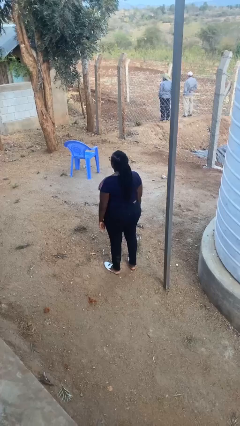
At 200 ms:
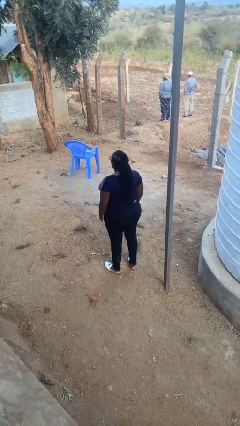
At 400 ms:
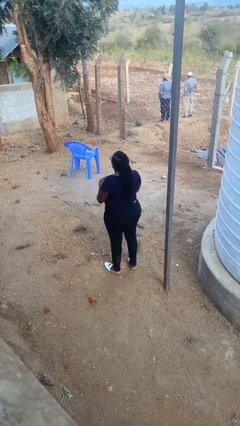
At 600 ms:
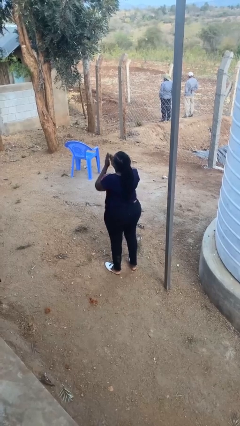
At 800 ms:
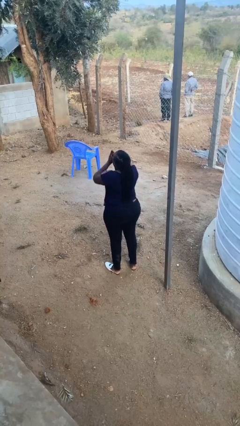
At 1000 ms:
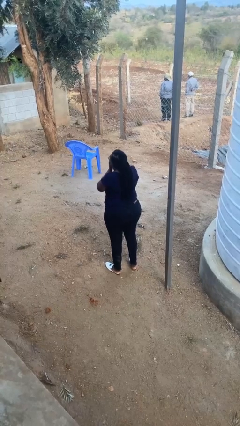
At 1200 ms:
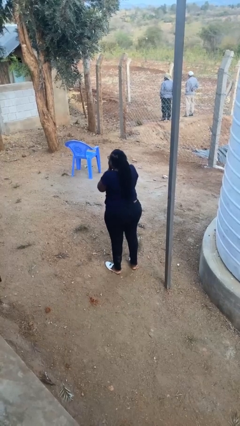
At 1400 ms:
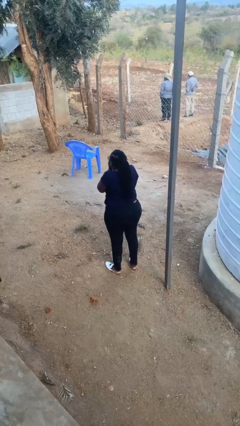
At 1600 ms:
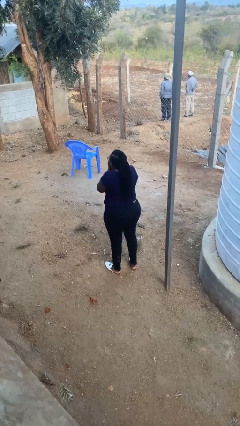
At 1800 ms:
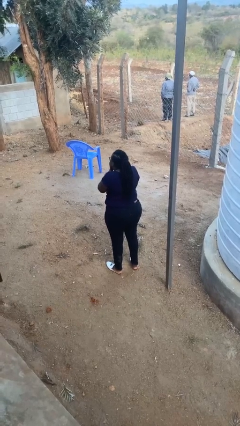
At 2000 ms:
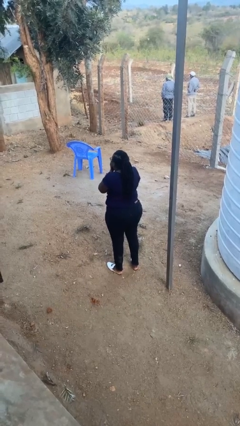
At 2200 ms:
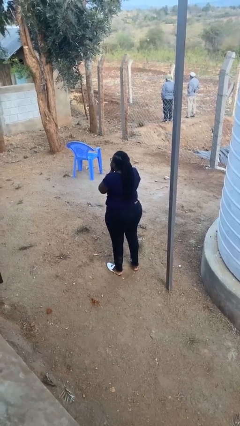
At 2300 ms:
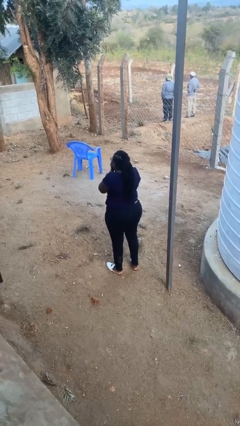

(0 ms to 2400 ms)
person sneezes into hand

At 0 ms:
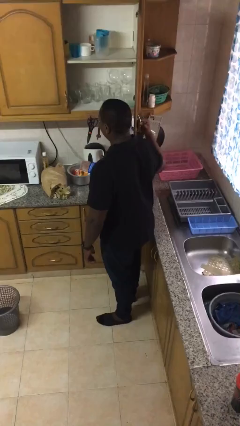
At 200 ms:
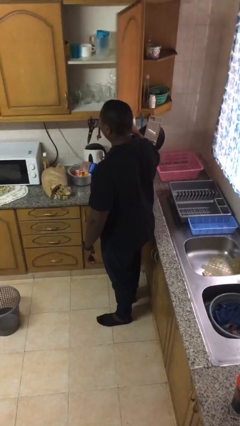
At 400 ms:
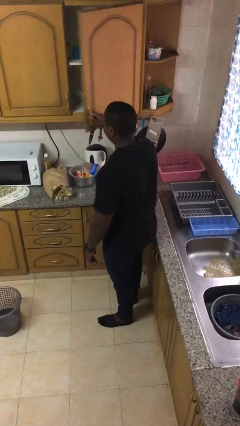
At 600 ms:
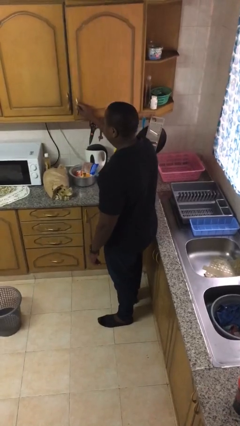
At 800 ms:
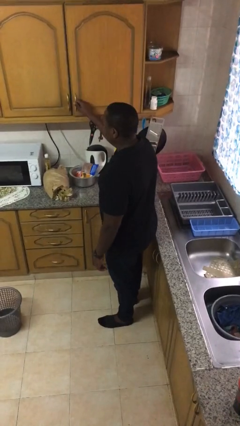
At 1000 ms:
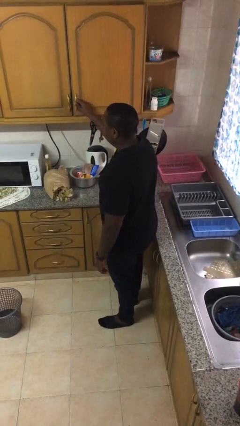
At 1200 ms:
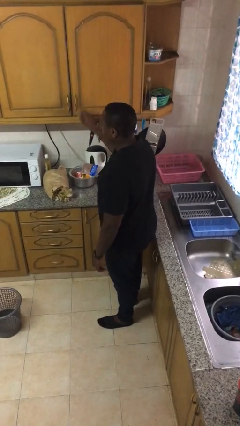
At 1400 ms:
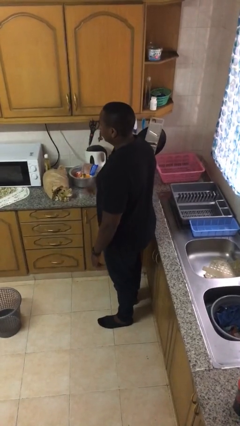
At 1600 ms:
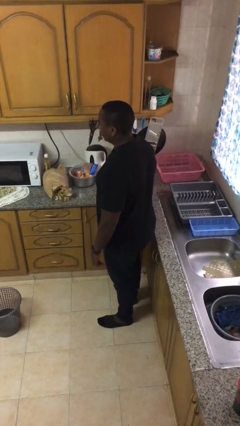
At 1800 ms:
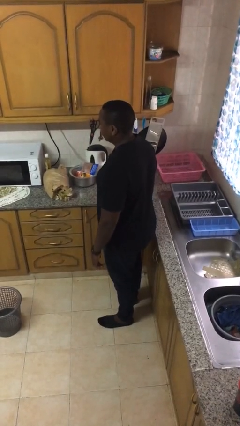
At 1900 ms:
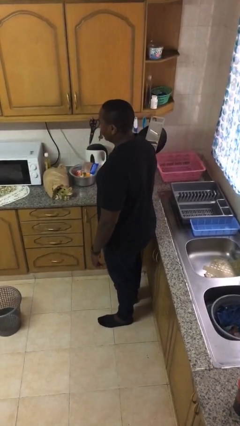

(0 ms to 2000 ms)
person closes cabinet

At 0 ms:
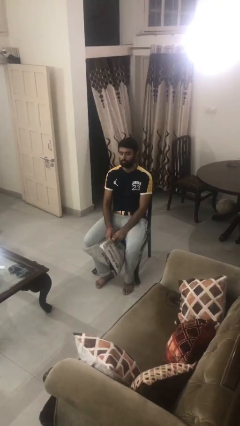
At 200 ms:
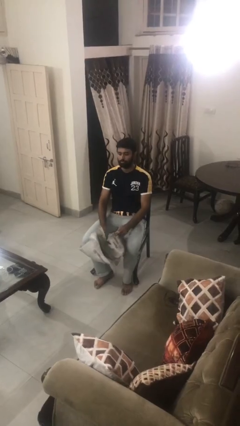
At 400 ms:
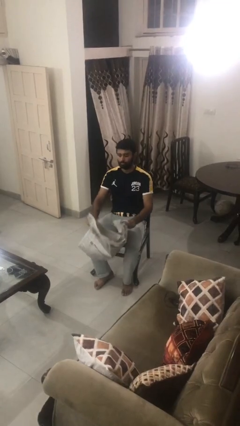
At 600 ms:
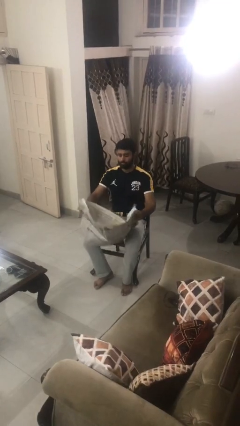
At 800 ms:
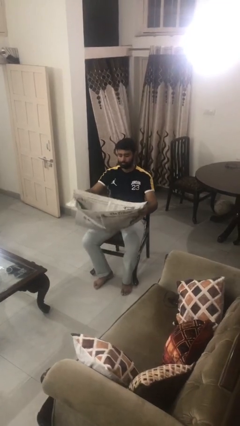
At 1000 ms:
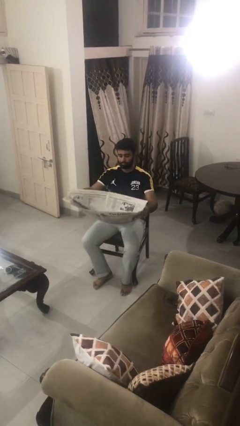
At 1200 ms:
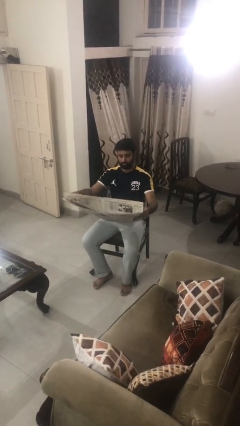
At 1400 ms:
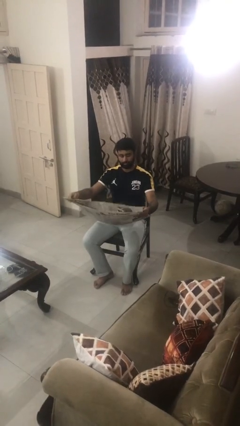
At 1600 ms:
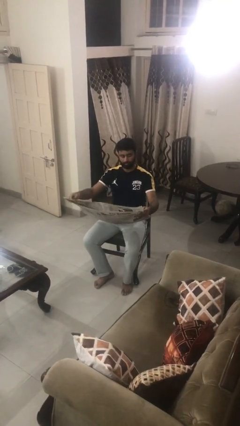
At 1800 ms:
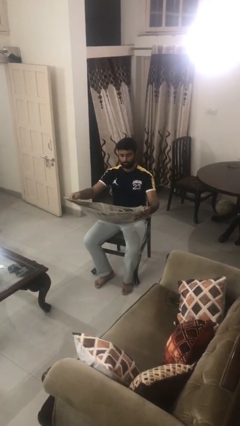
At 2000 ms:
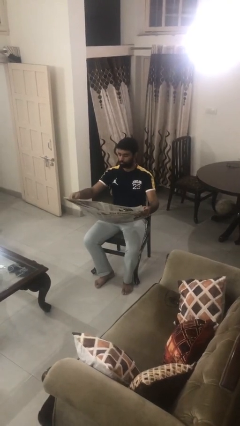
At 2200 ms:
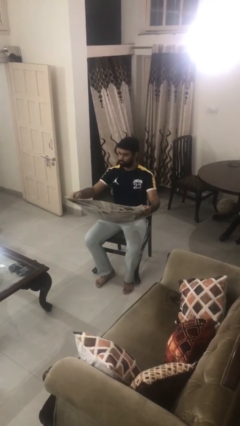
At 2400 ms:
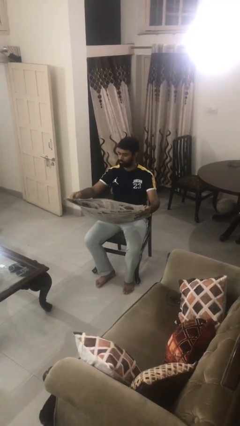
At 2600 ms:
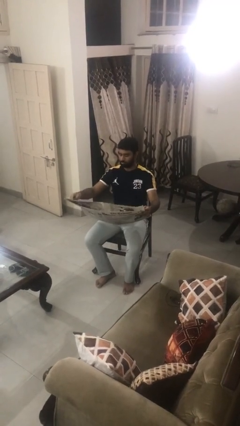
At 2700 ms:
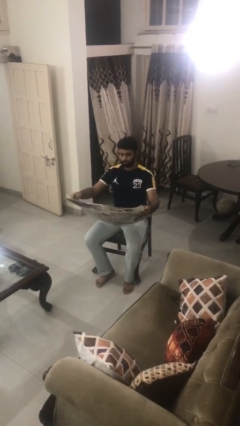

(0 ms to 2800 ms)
person reads newspaper

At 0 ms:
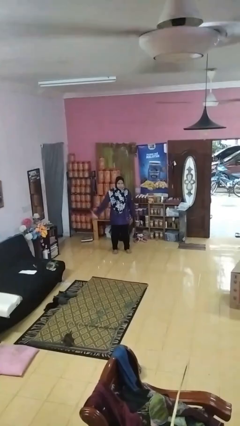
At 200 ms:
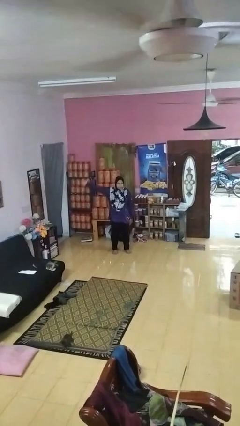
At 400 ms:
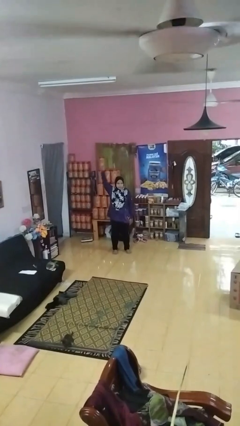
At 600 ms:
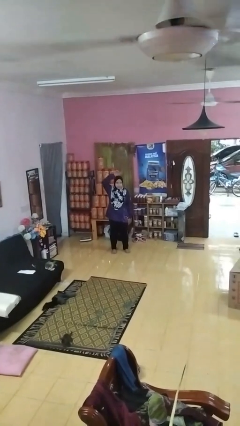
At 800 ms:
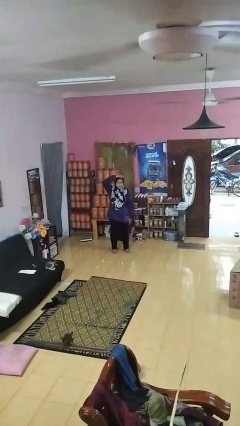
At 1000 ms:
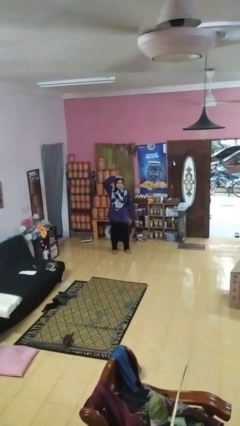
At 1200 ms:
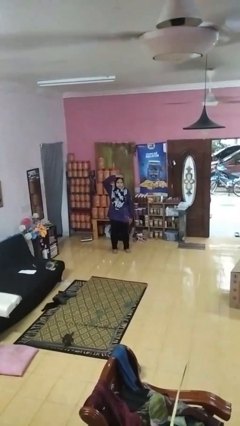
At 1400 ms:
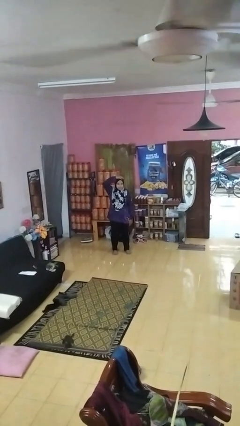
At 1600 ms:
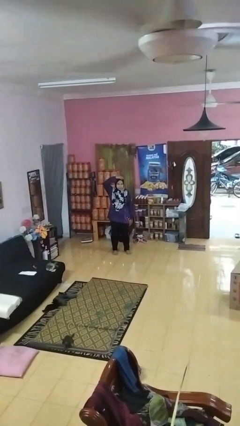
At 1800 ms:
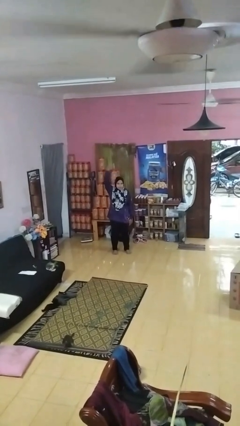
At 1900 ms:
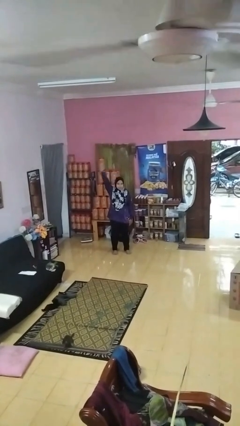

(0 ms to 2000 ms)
person pats head

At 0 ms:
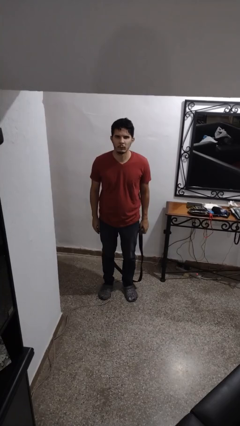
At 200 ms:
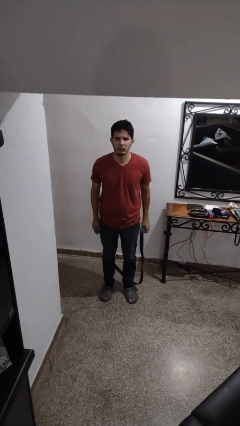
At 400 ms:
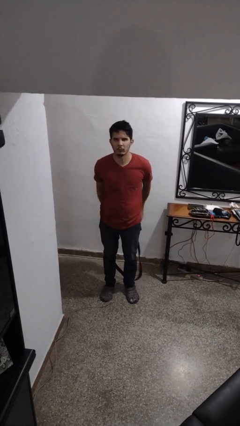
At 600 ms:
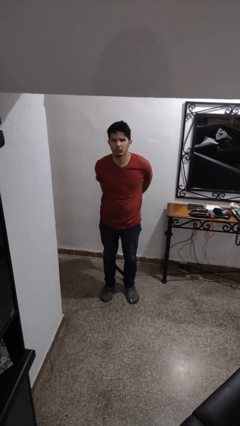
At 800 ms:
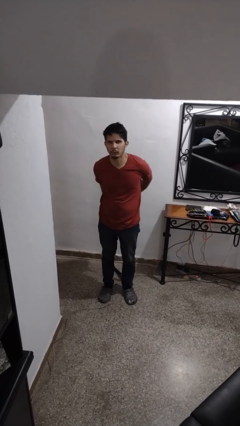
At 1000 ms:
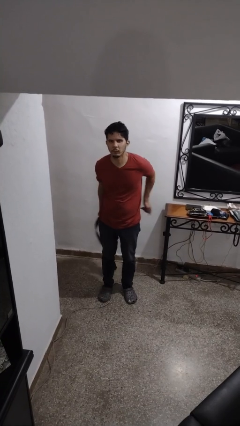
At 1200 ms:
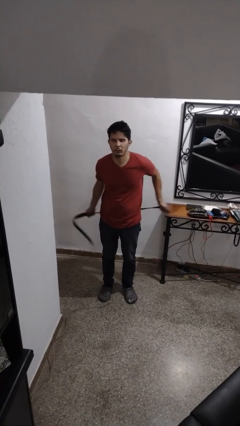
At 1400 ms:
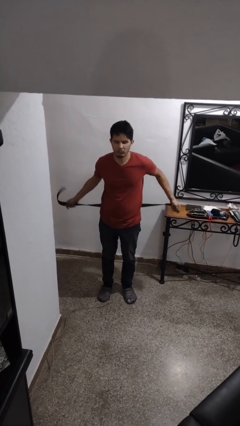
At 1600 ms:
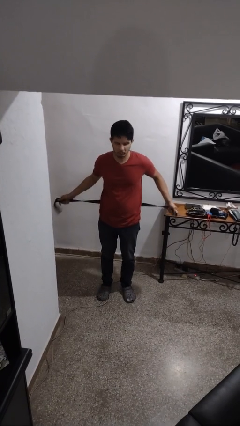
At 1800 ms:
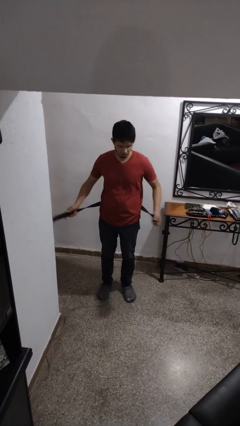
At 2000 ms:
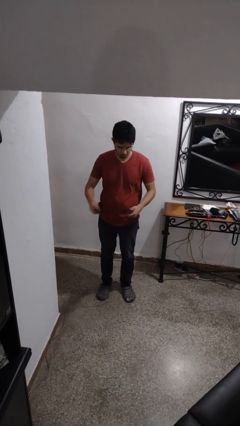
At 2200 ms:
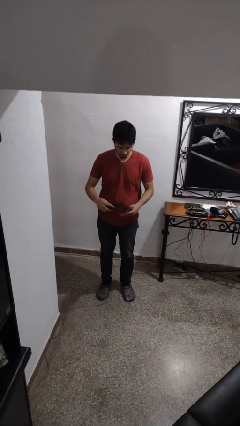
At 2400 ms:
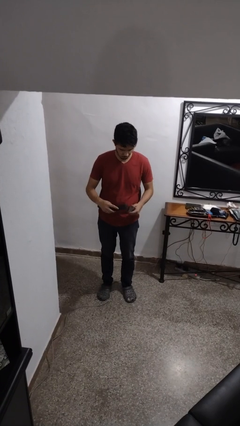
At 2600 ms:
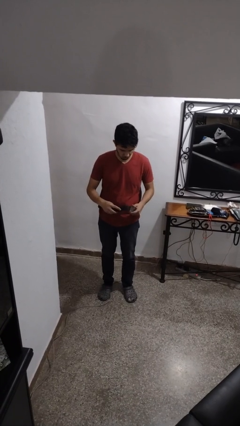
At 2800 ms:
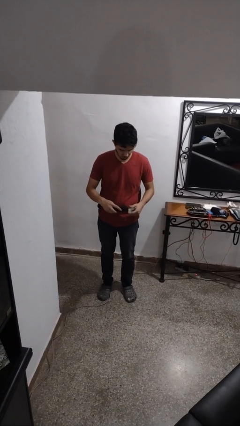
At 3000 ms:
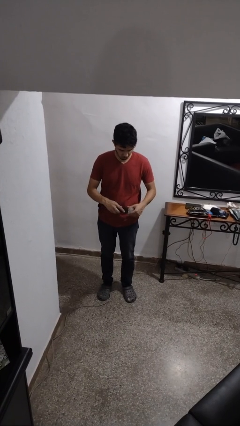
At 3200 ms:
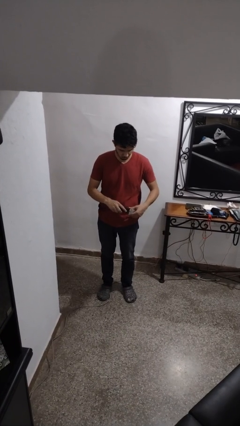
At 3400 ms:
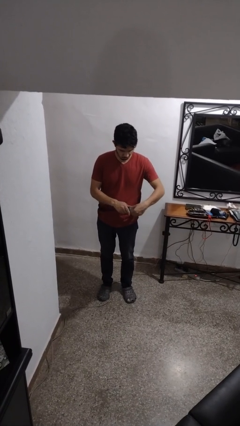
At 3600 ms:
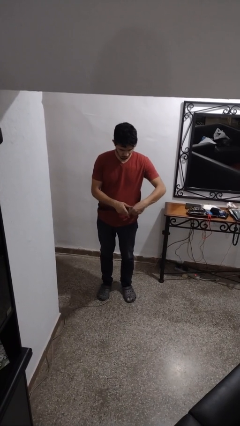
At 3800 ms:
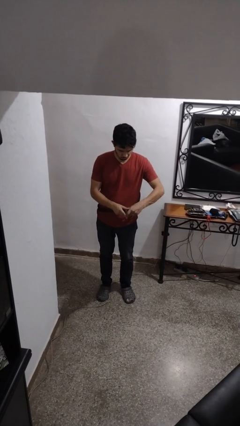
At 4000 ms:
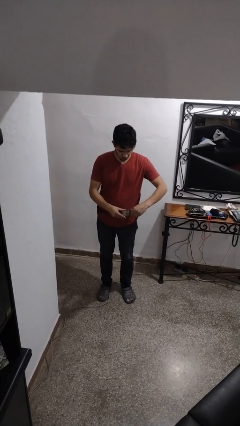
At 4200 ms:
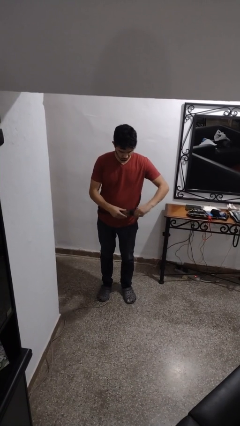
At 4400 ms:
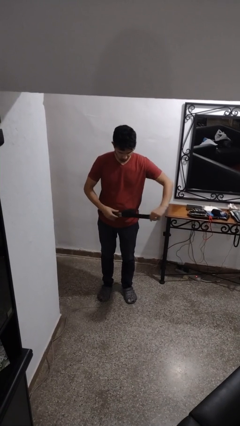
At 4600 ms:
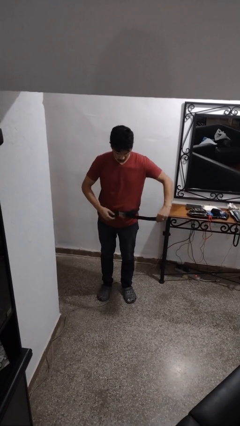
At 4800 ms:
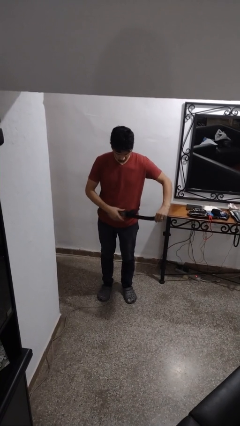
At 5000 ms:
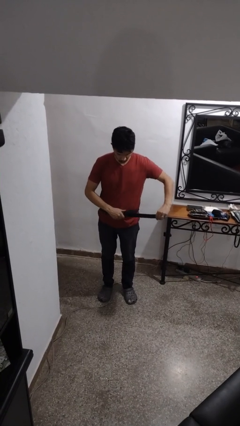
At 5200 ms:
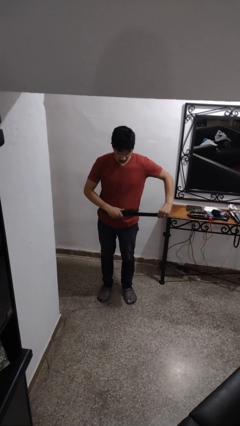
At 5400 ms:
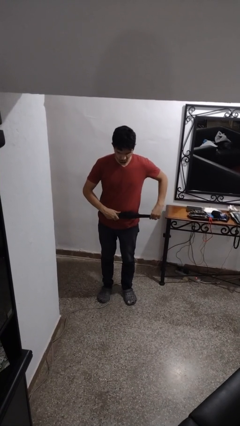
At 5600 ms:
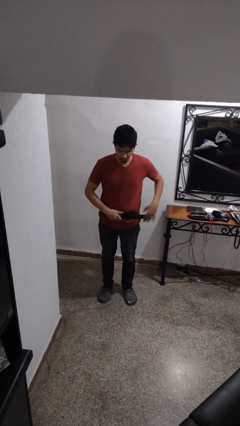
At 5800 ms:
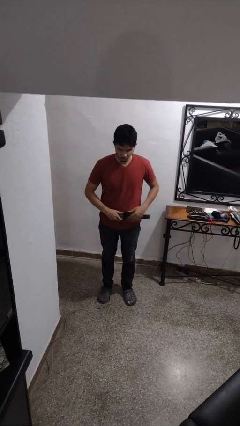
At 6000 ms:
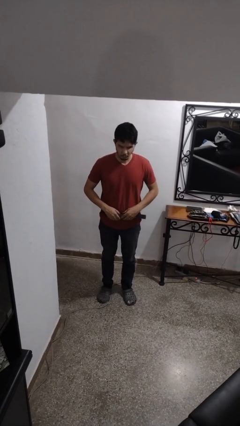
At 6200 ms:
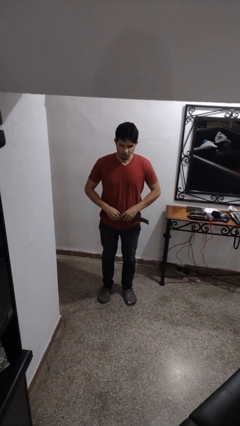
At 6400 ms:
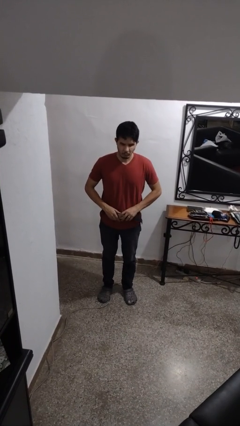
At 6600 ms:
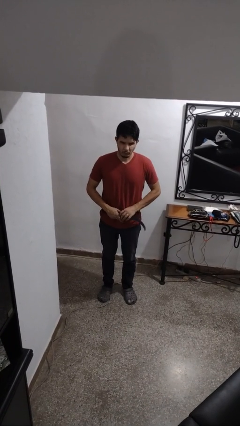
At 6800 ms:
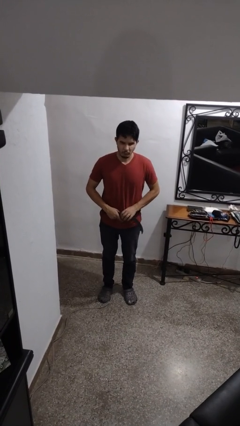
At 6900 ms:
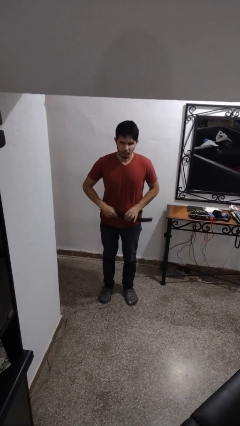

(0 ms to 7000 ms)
person puts on belt

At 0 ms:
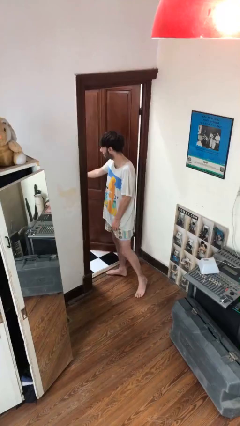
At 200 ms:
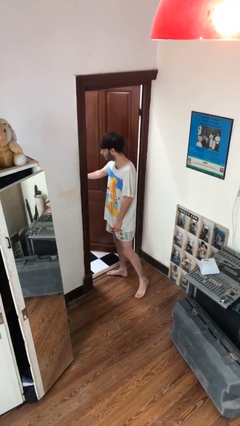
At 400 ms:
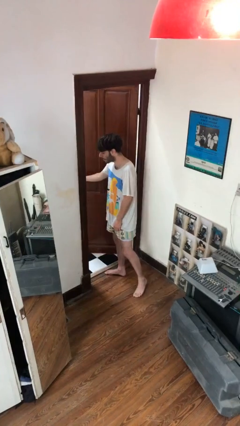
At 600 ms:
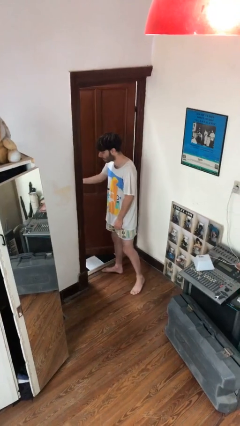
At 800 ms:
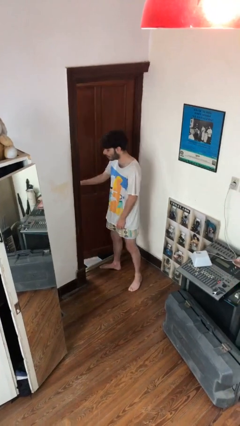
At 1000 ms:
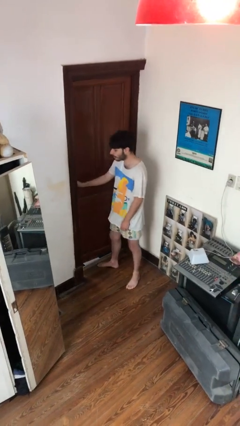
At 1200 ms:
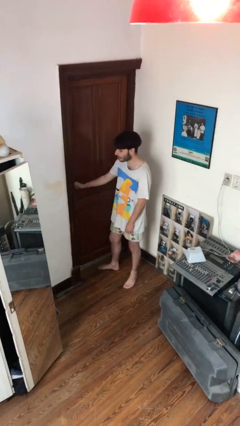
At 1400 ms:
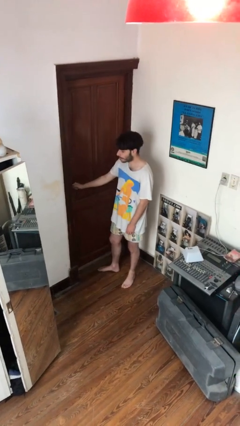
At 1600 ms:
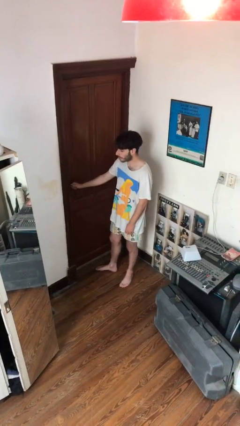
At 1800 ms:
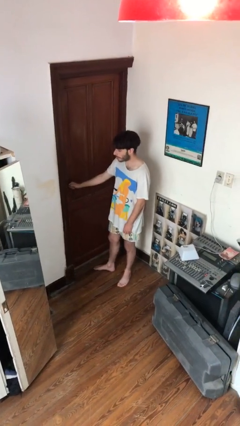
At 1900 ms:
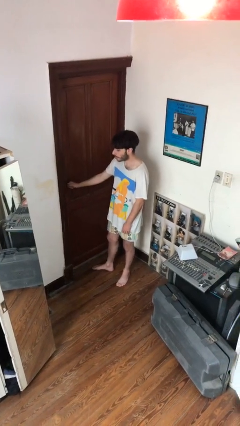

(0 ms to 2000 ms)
person closes facility door
